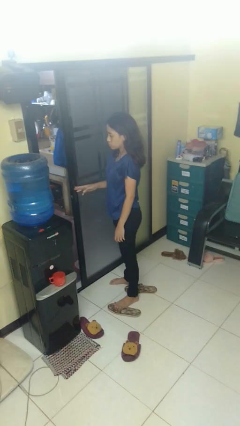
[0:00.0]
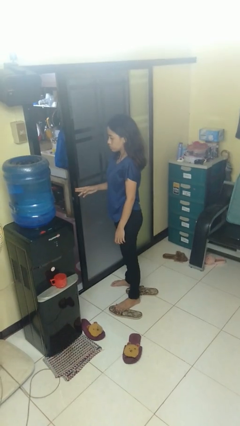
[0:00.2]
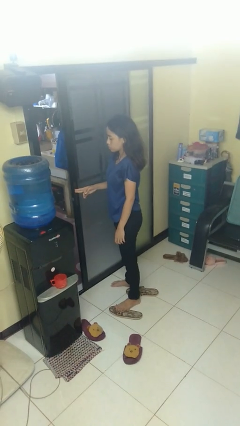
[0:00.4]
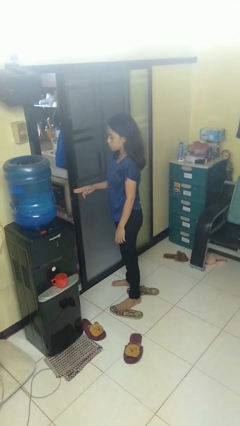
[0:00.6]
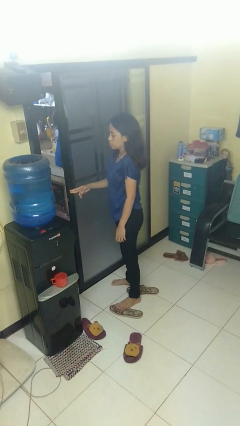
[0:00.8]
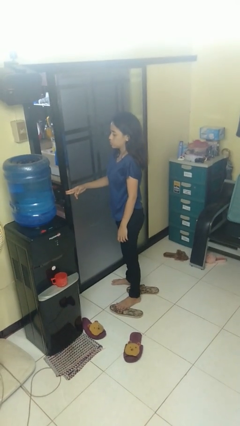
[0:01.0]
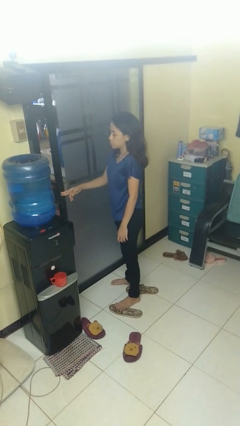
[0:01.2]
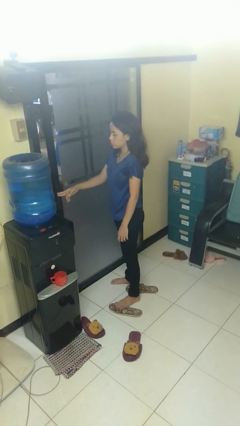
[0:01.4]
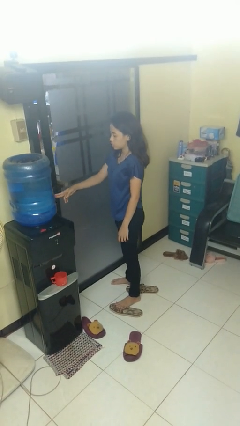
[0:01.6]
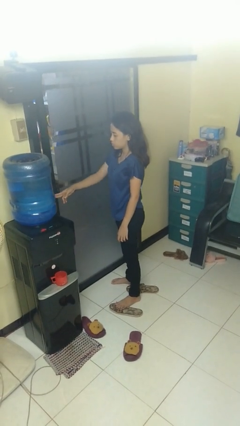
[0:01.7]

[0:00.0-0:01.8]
person closes sliding door

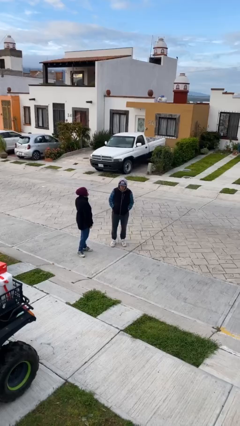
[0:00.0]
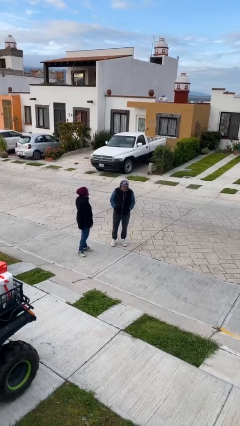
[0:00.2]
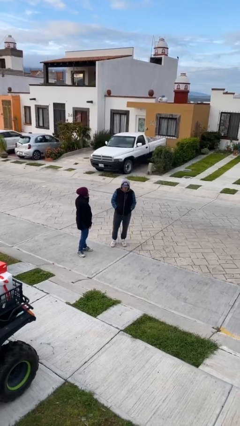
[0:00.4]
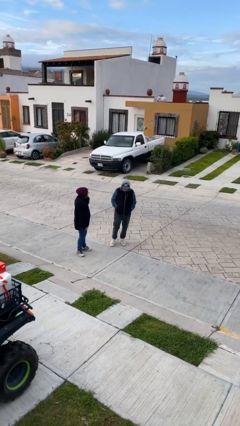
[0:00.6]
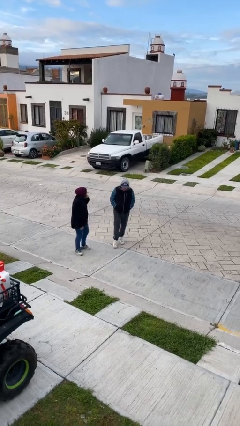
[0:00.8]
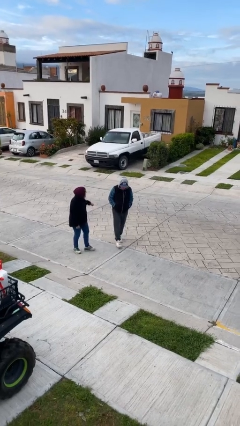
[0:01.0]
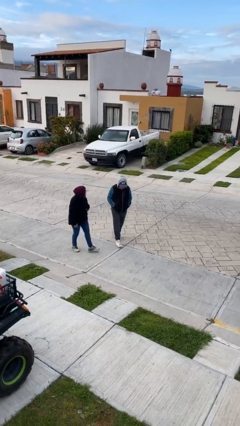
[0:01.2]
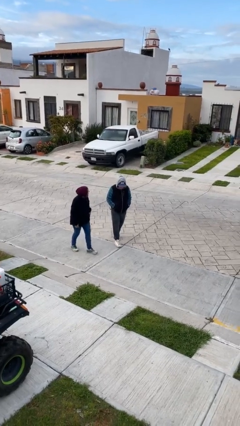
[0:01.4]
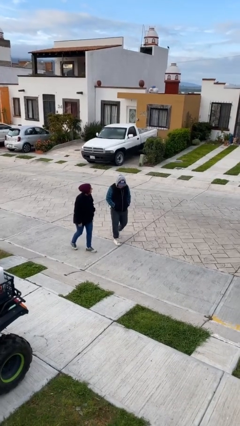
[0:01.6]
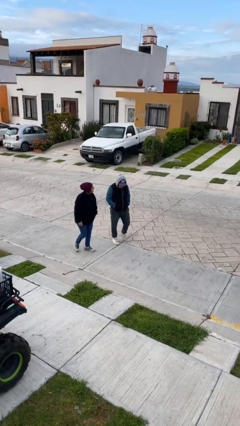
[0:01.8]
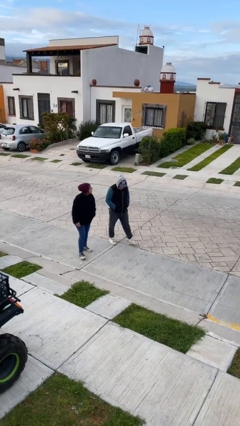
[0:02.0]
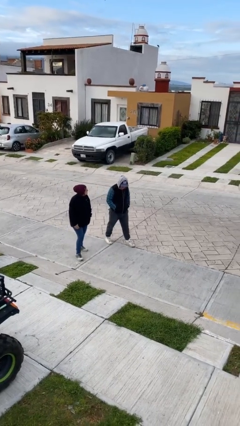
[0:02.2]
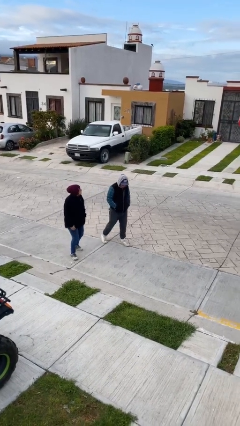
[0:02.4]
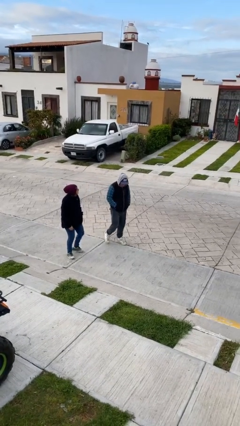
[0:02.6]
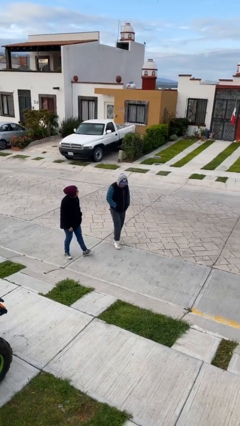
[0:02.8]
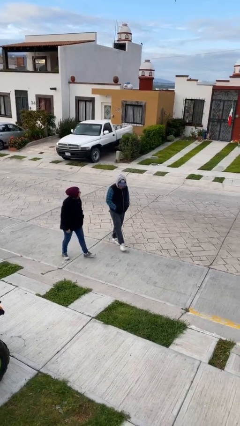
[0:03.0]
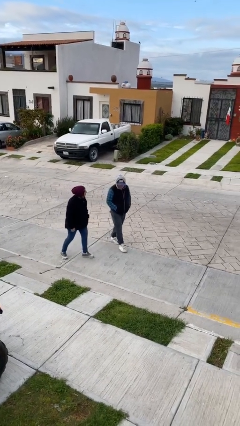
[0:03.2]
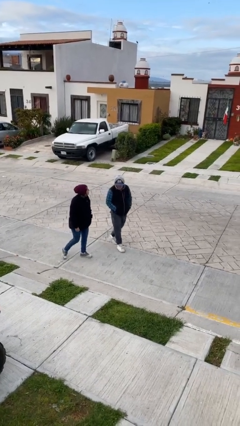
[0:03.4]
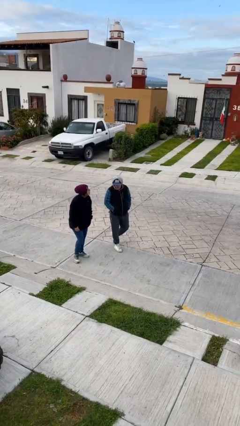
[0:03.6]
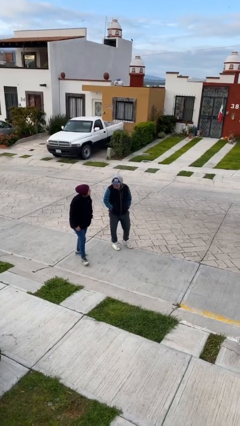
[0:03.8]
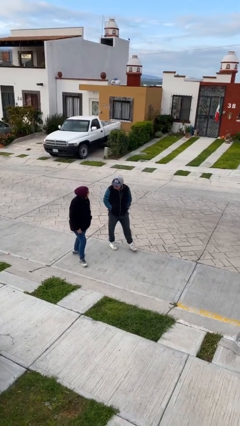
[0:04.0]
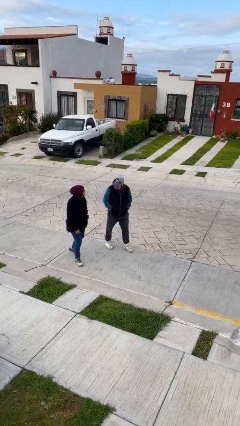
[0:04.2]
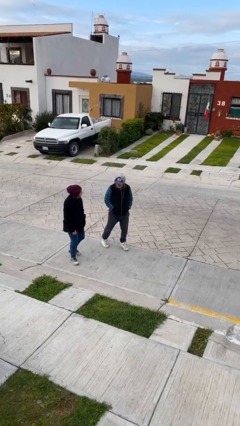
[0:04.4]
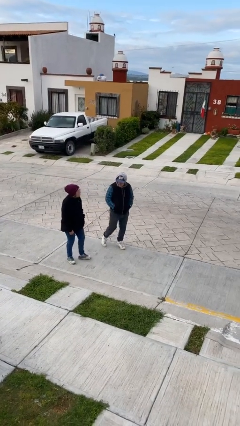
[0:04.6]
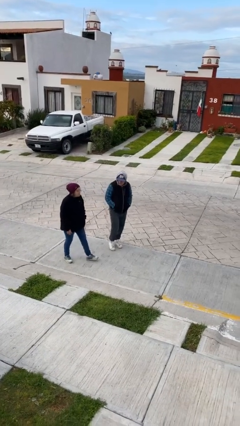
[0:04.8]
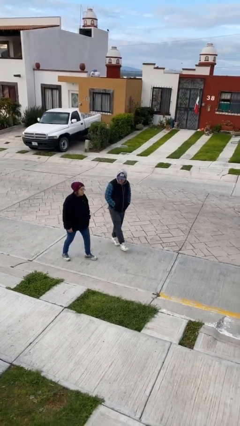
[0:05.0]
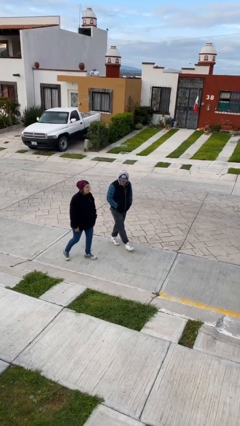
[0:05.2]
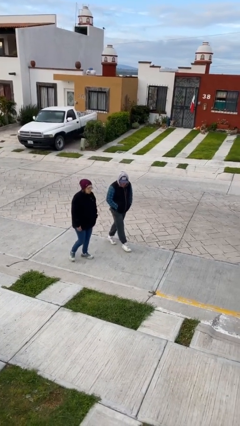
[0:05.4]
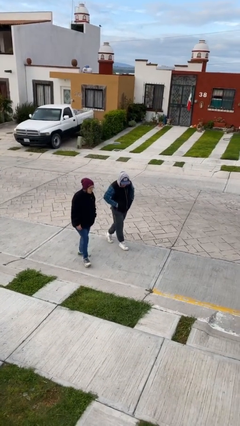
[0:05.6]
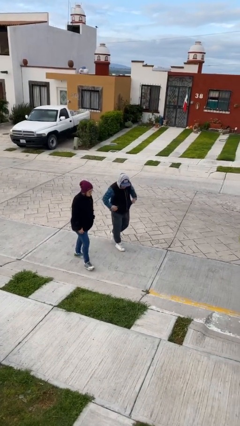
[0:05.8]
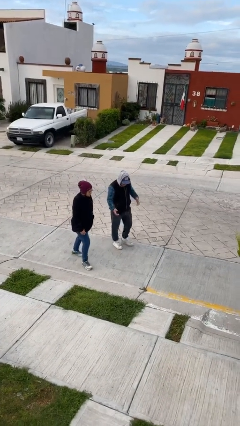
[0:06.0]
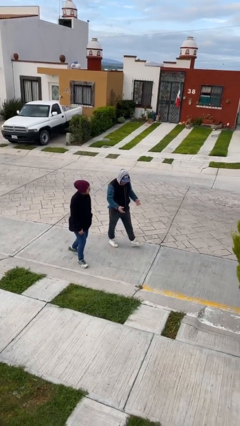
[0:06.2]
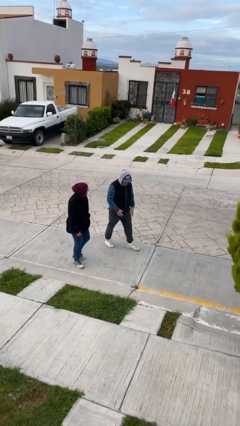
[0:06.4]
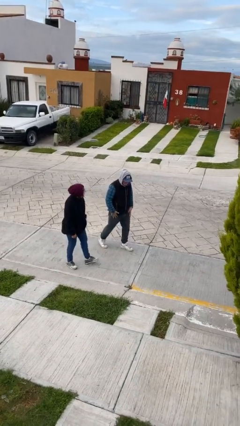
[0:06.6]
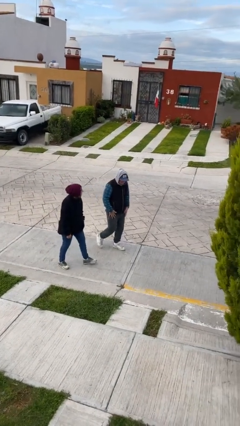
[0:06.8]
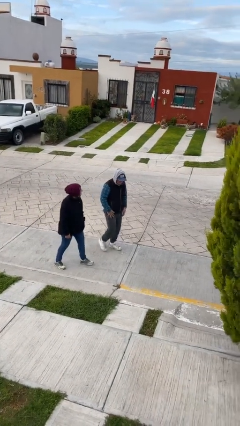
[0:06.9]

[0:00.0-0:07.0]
person talks to person

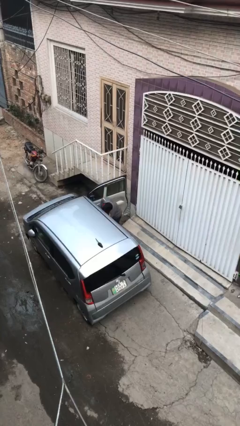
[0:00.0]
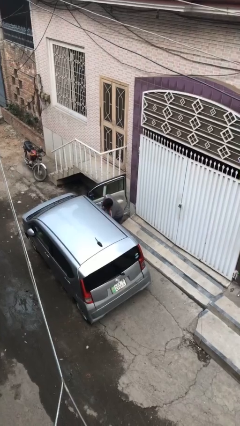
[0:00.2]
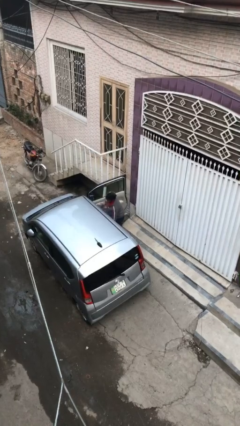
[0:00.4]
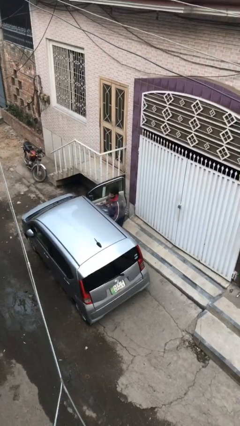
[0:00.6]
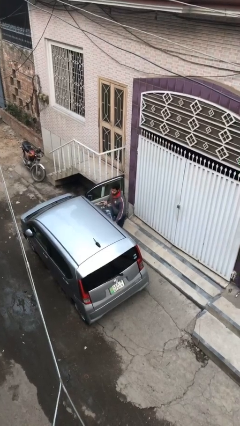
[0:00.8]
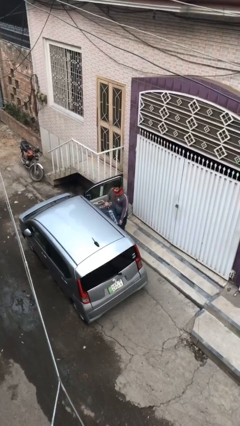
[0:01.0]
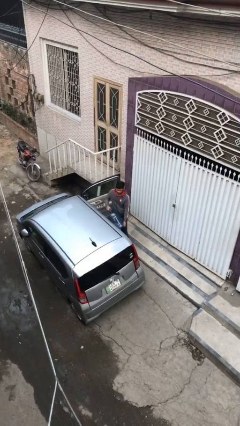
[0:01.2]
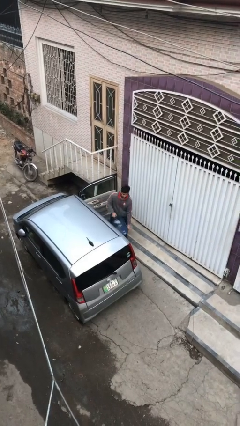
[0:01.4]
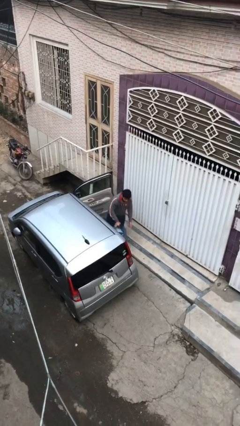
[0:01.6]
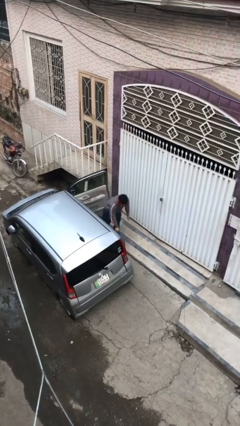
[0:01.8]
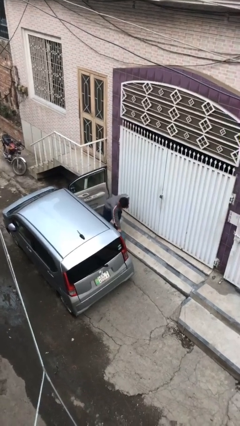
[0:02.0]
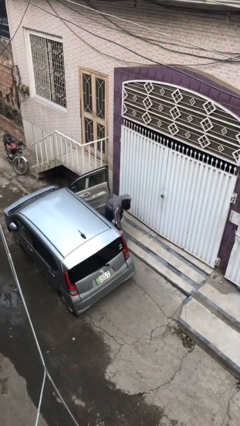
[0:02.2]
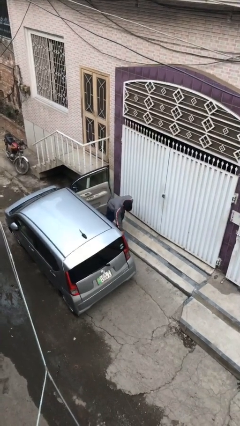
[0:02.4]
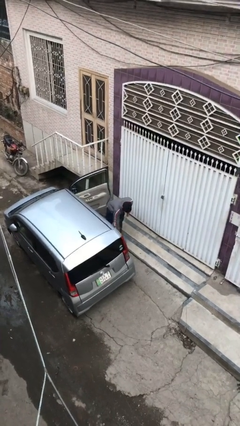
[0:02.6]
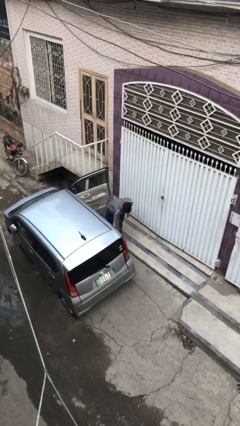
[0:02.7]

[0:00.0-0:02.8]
person unloads car

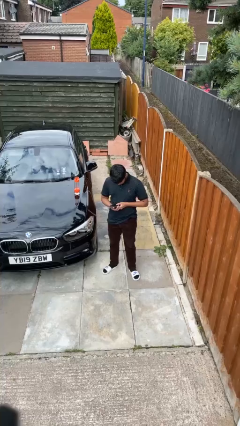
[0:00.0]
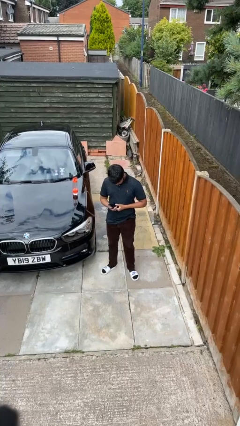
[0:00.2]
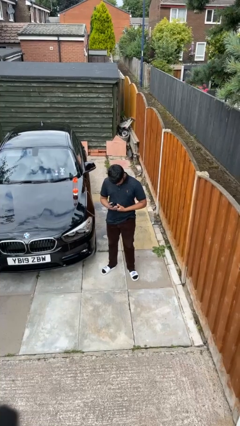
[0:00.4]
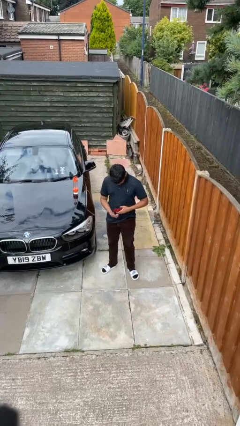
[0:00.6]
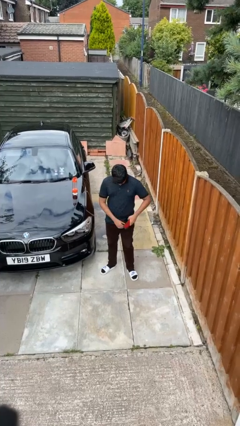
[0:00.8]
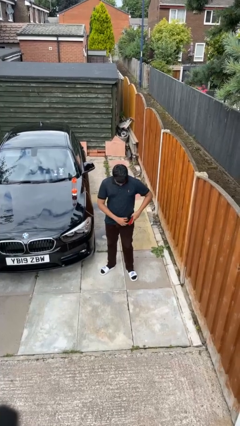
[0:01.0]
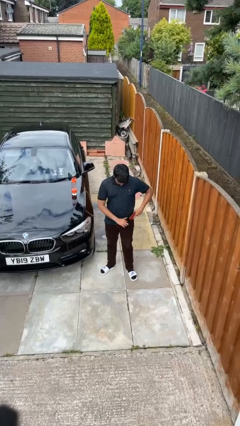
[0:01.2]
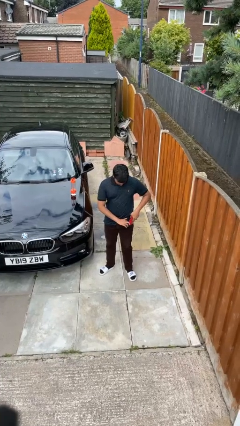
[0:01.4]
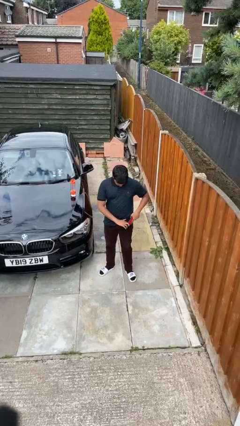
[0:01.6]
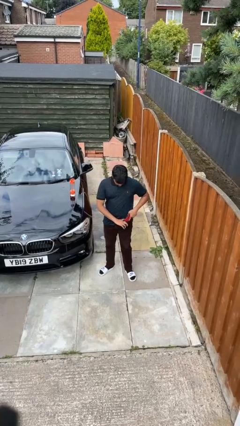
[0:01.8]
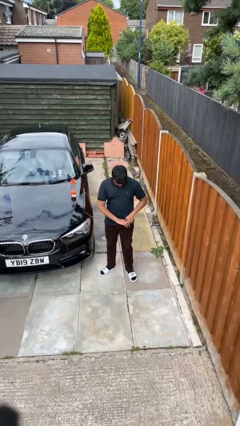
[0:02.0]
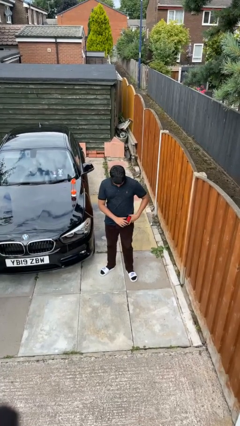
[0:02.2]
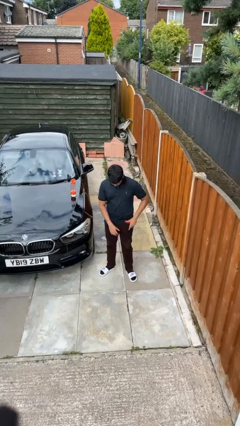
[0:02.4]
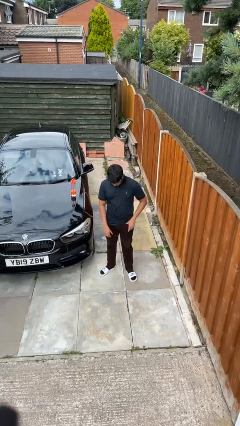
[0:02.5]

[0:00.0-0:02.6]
person puts phone into pocket

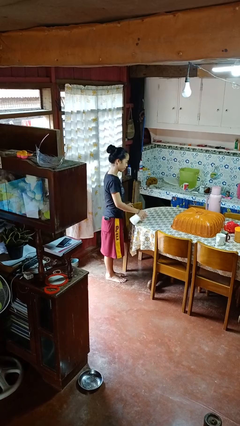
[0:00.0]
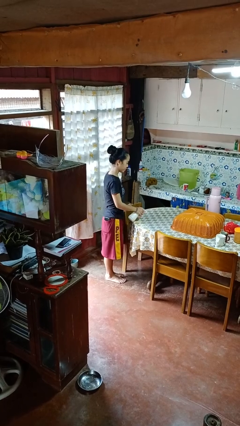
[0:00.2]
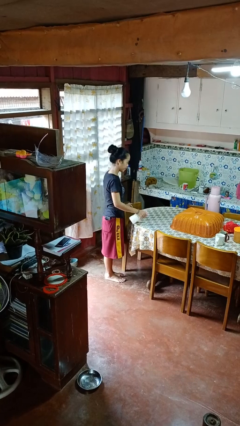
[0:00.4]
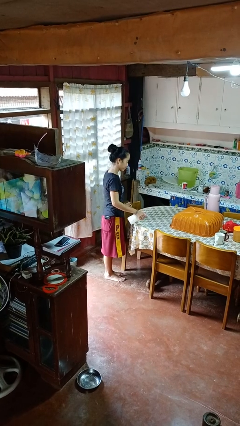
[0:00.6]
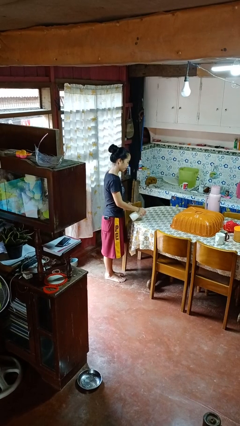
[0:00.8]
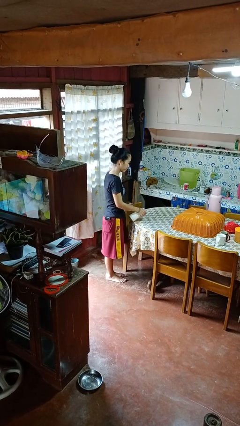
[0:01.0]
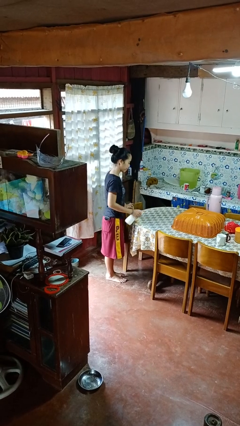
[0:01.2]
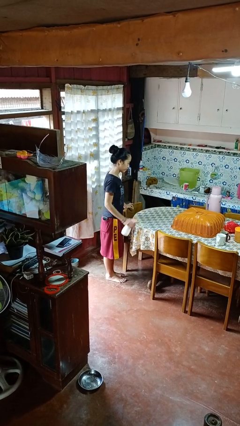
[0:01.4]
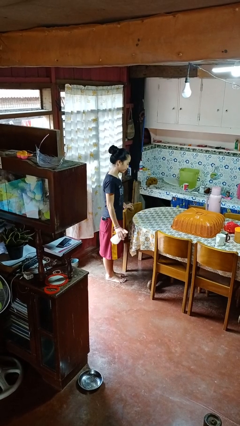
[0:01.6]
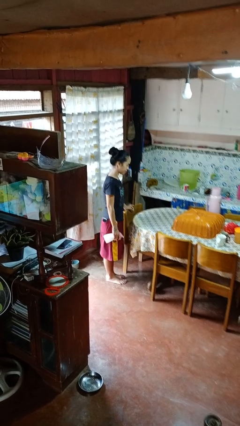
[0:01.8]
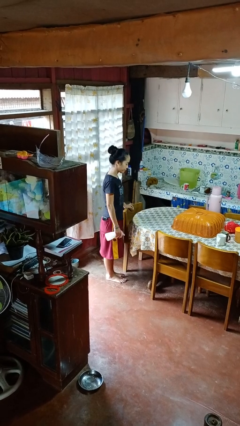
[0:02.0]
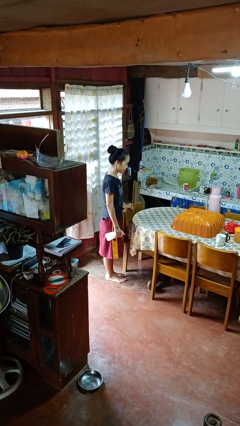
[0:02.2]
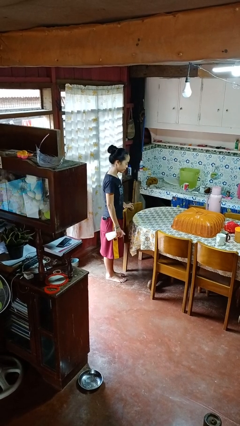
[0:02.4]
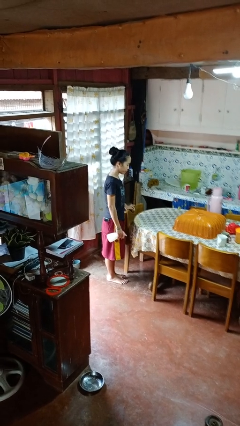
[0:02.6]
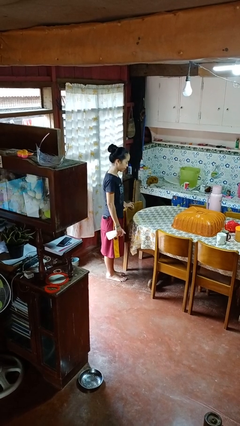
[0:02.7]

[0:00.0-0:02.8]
person sprays from bottle

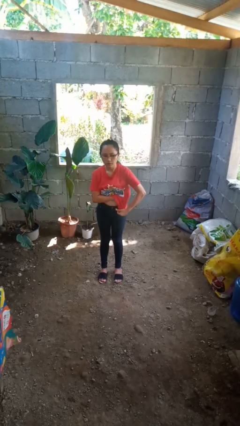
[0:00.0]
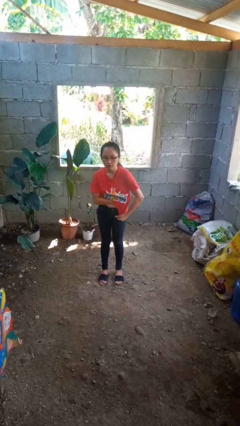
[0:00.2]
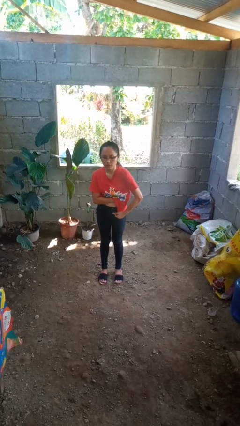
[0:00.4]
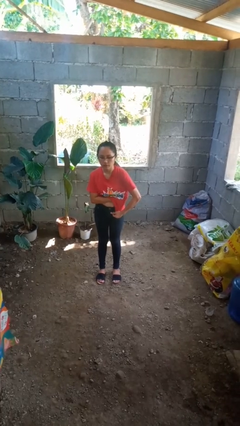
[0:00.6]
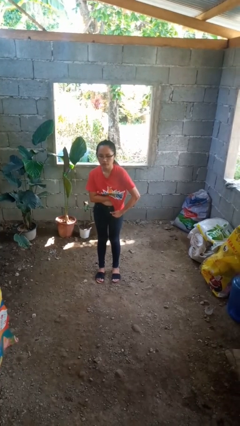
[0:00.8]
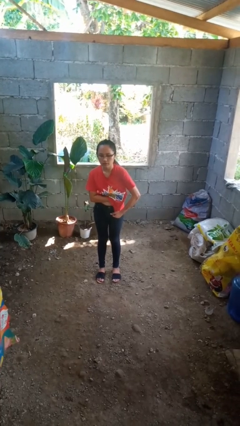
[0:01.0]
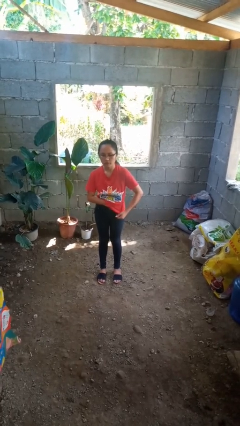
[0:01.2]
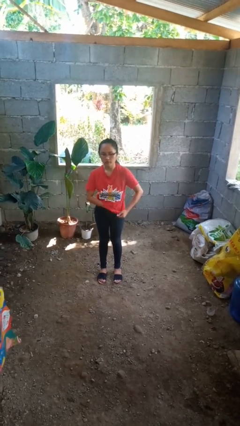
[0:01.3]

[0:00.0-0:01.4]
person applies deodorant
